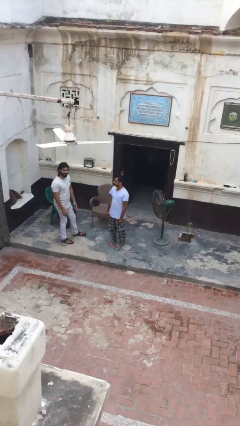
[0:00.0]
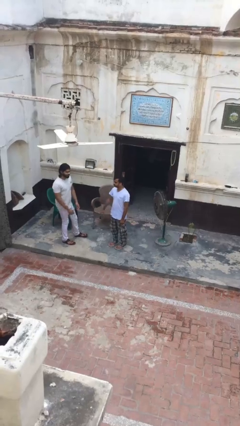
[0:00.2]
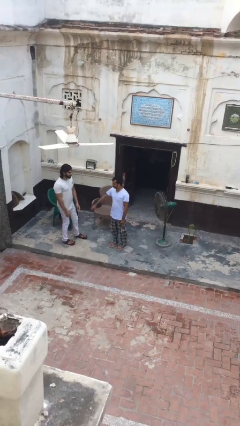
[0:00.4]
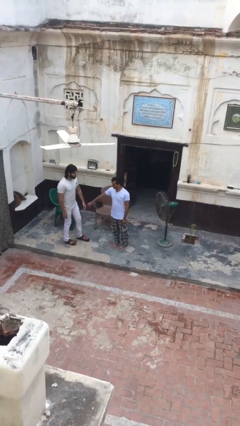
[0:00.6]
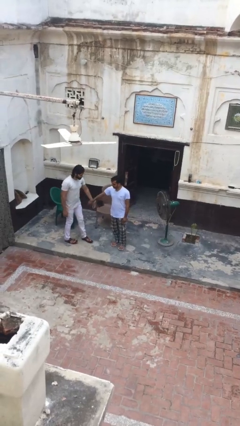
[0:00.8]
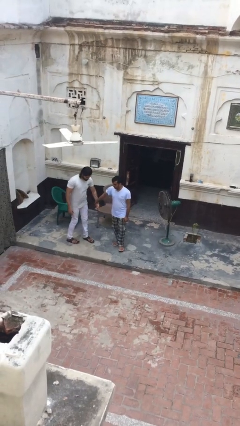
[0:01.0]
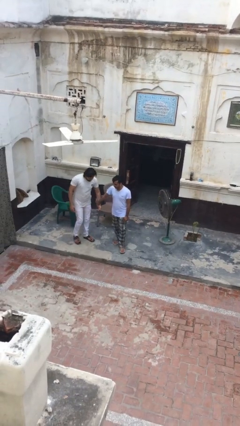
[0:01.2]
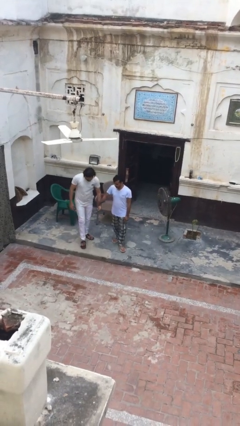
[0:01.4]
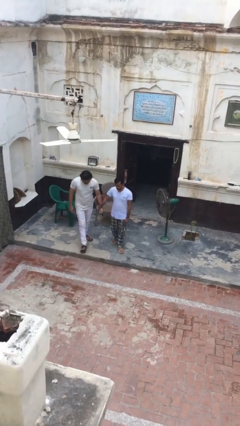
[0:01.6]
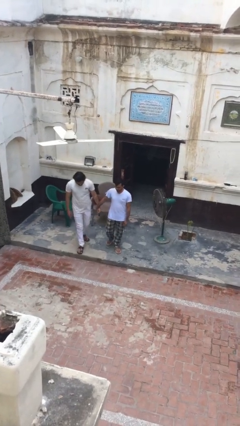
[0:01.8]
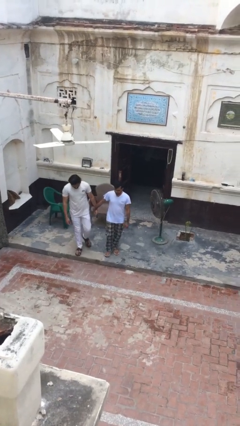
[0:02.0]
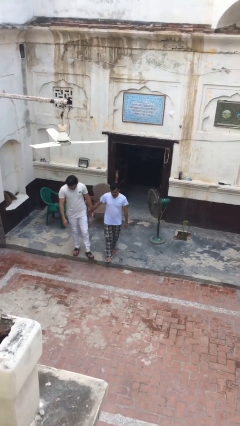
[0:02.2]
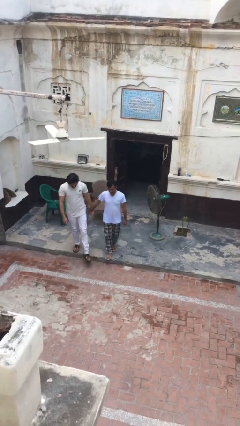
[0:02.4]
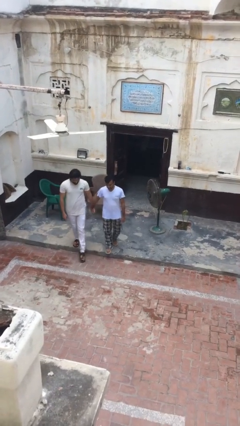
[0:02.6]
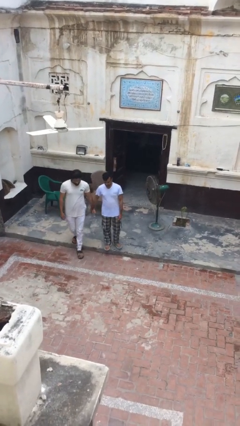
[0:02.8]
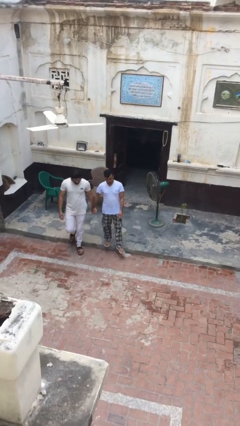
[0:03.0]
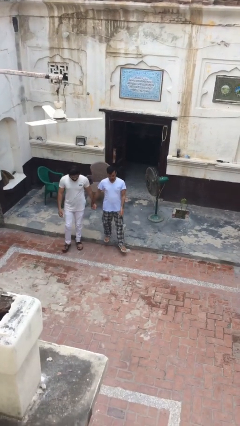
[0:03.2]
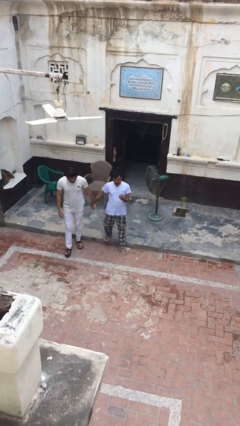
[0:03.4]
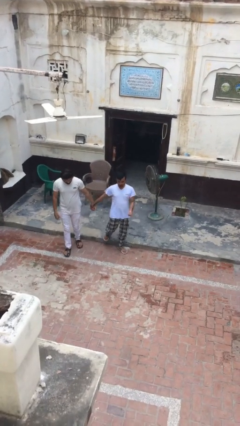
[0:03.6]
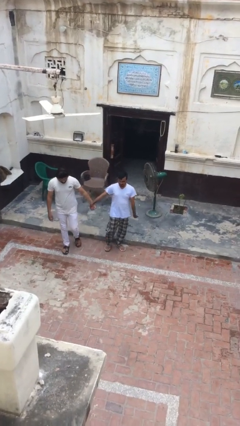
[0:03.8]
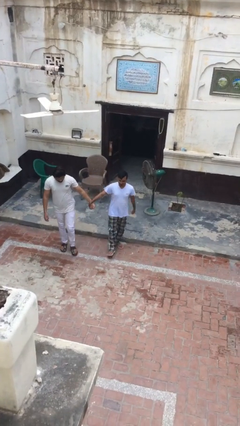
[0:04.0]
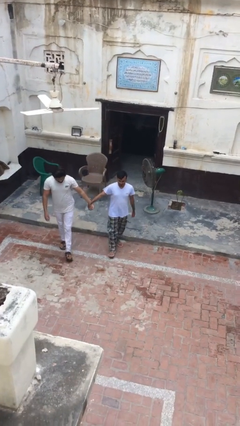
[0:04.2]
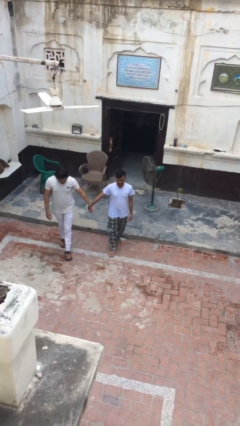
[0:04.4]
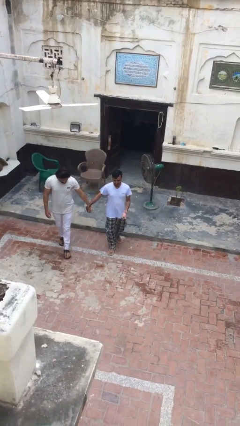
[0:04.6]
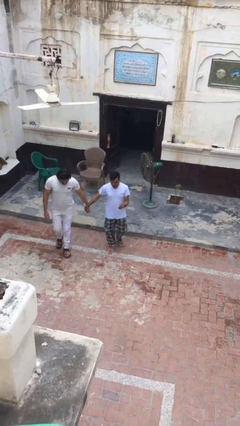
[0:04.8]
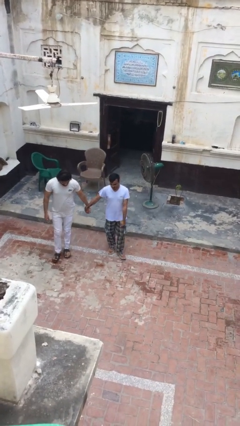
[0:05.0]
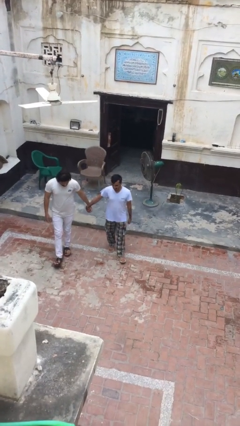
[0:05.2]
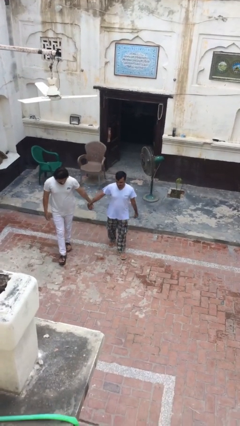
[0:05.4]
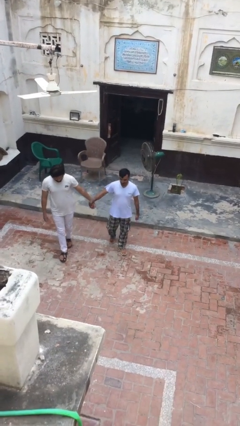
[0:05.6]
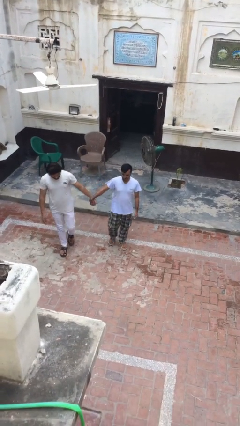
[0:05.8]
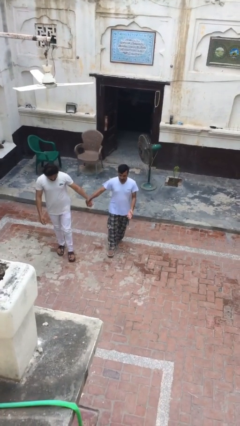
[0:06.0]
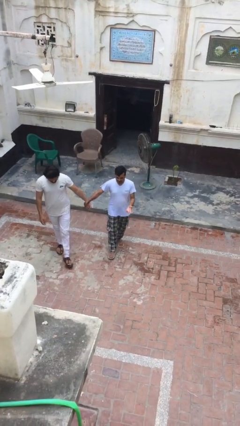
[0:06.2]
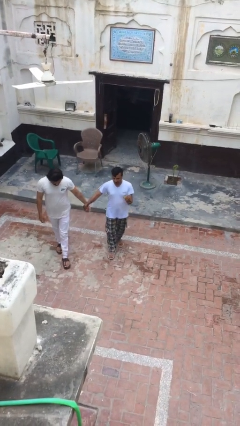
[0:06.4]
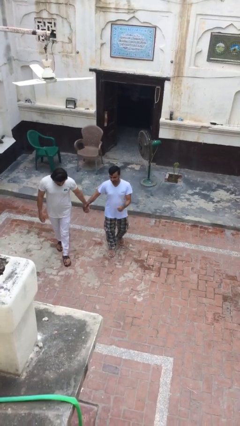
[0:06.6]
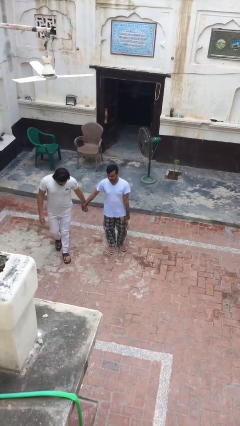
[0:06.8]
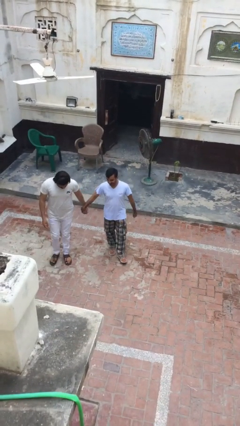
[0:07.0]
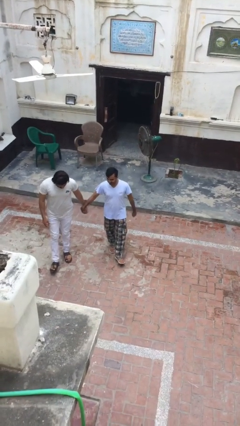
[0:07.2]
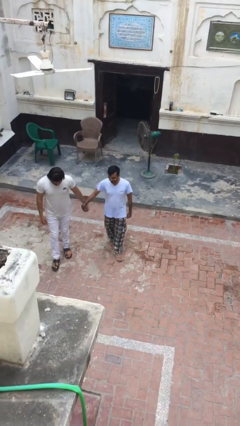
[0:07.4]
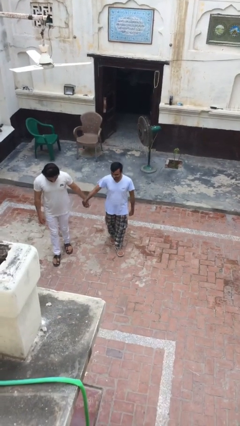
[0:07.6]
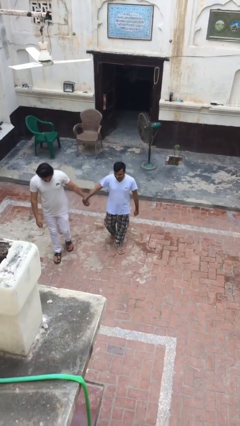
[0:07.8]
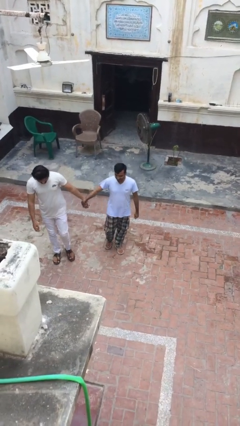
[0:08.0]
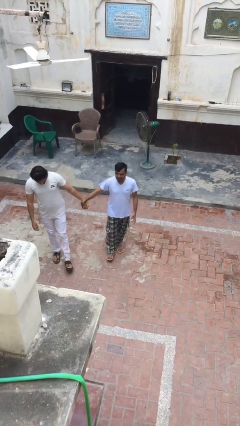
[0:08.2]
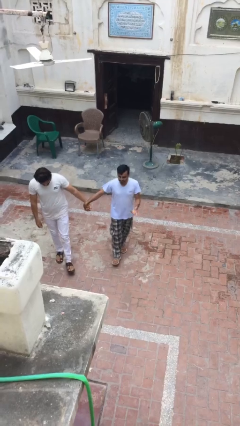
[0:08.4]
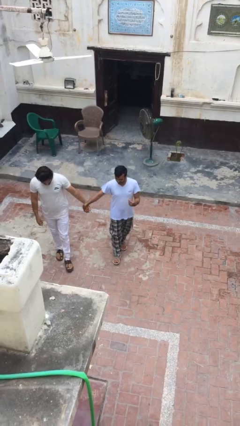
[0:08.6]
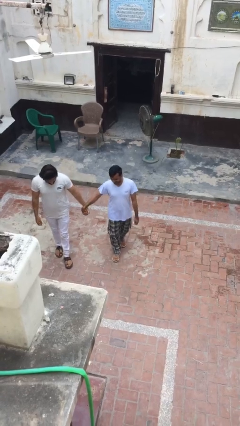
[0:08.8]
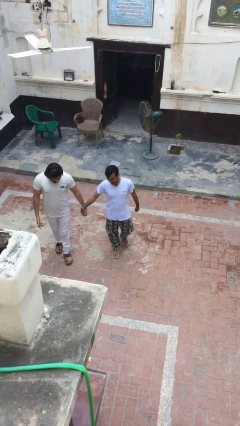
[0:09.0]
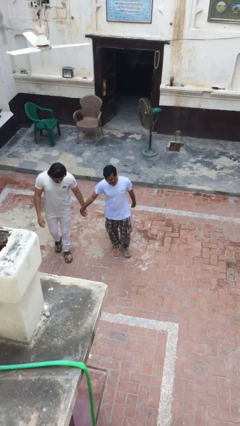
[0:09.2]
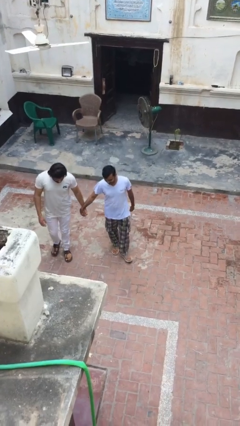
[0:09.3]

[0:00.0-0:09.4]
person holds hand

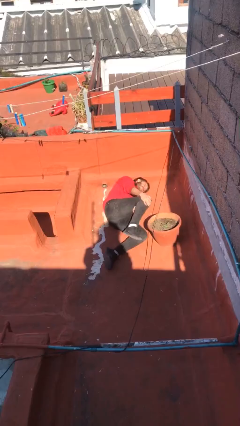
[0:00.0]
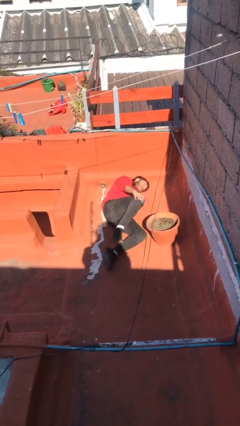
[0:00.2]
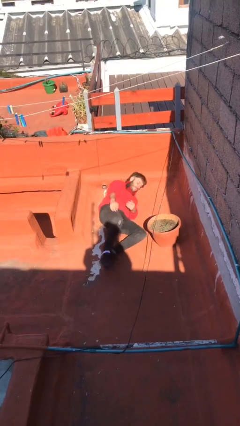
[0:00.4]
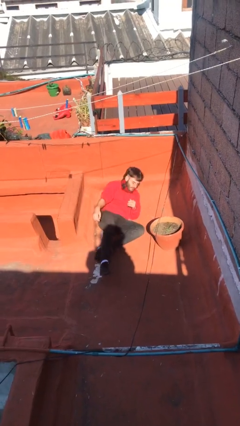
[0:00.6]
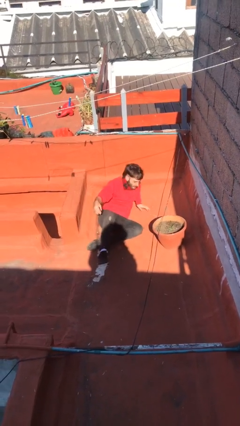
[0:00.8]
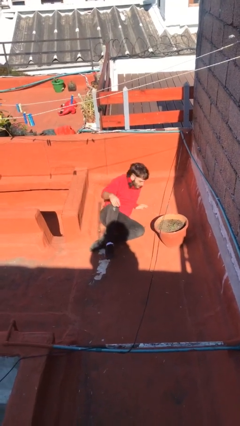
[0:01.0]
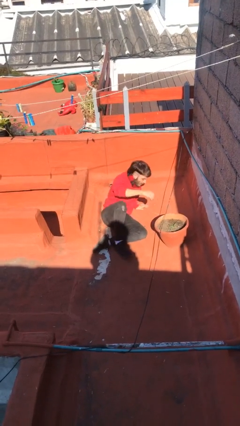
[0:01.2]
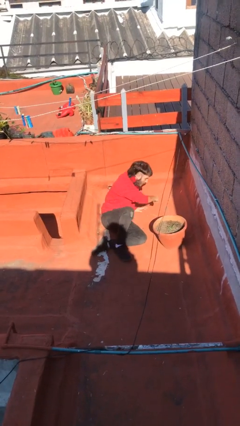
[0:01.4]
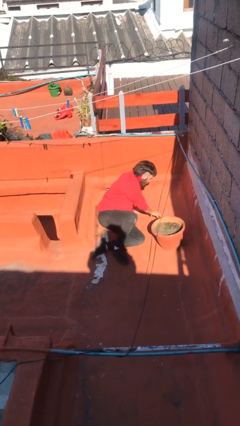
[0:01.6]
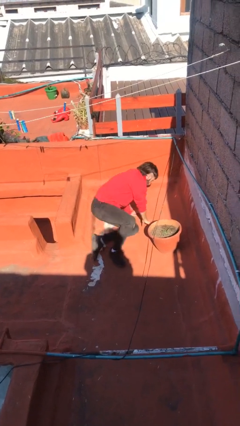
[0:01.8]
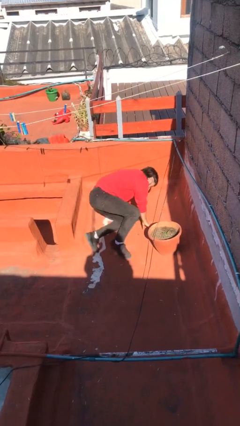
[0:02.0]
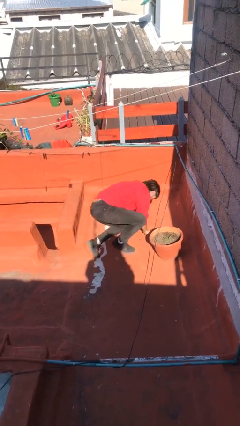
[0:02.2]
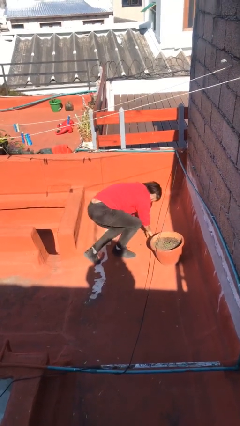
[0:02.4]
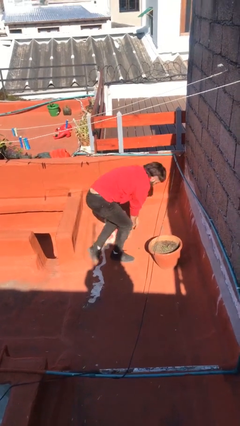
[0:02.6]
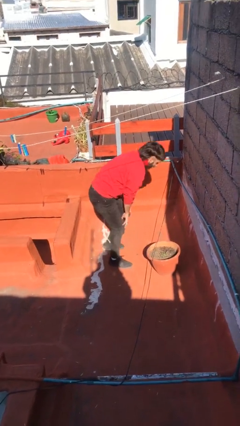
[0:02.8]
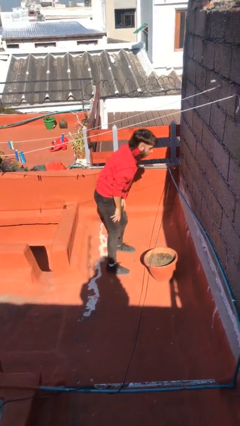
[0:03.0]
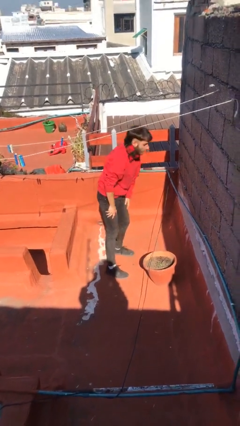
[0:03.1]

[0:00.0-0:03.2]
person stands up from floor

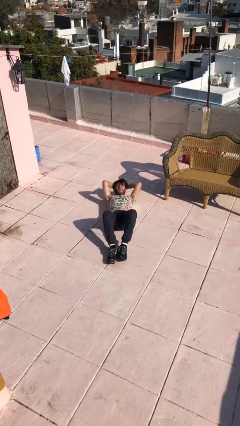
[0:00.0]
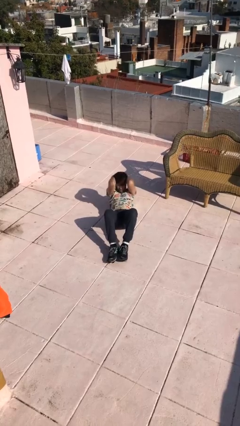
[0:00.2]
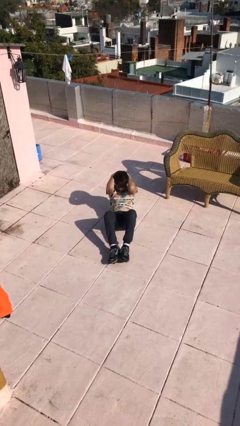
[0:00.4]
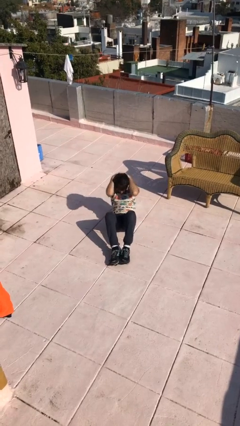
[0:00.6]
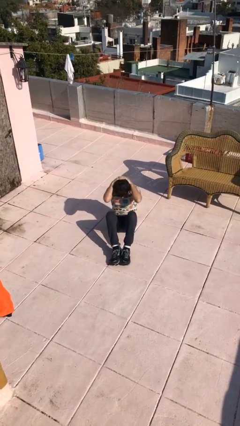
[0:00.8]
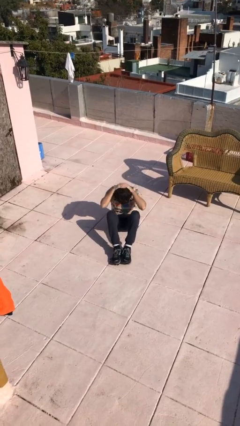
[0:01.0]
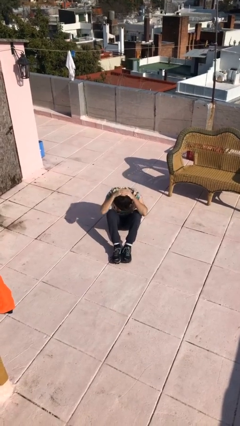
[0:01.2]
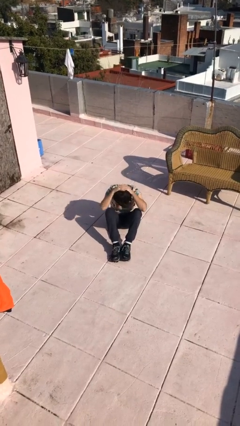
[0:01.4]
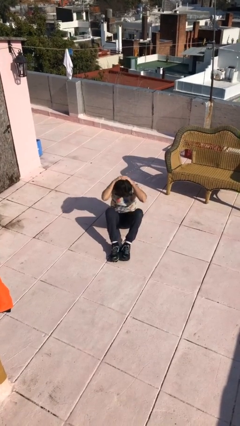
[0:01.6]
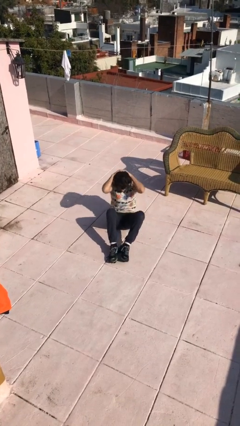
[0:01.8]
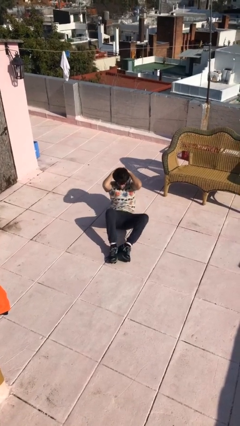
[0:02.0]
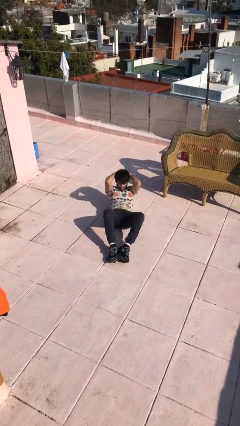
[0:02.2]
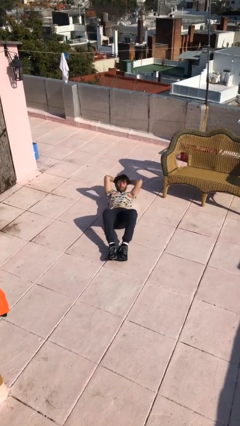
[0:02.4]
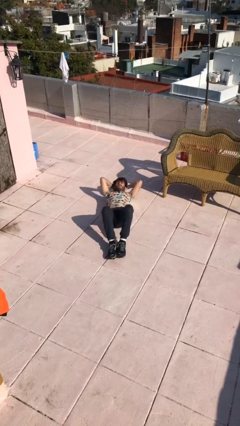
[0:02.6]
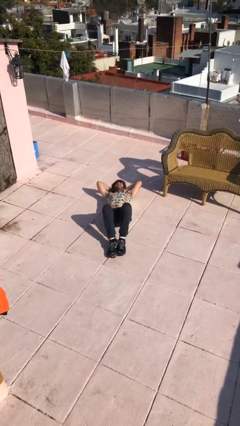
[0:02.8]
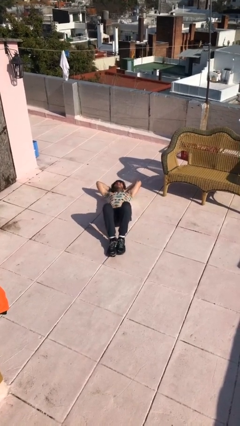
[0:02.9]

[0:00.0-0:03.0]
person exercises with situp

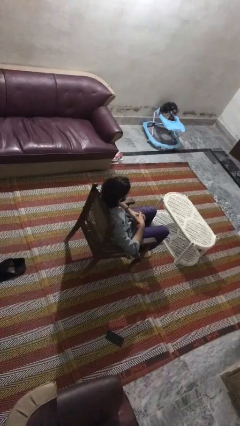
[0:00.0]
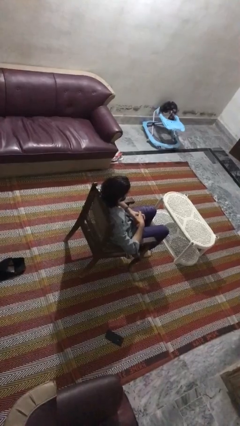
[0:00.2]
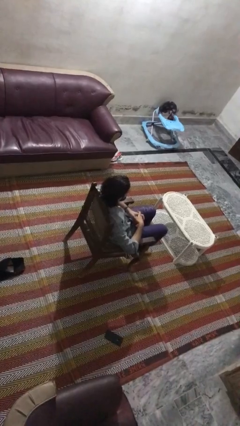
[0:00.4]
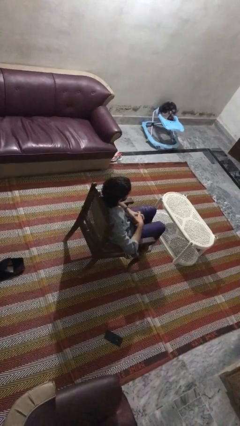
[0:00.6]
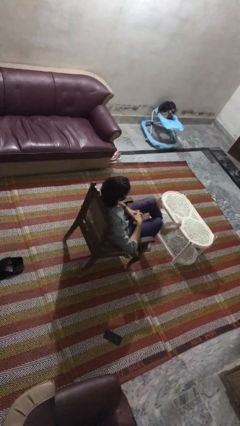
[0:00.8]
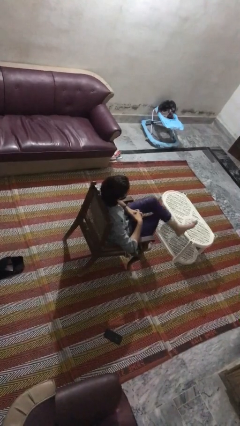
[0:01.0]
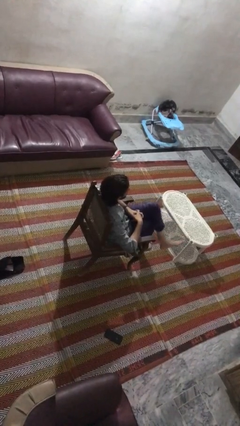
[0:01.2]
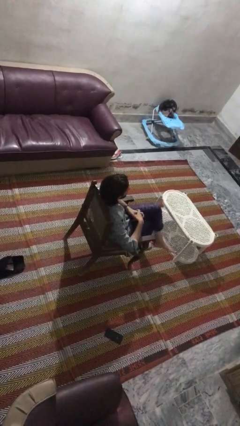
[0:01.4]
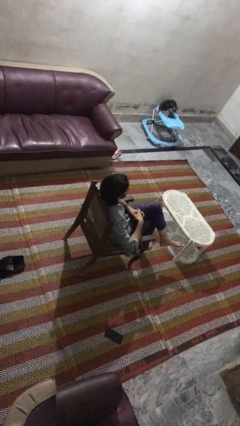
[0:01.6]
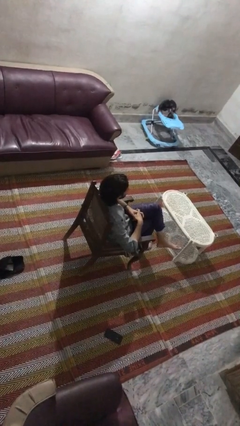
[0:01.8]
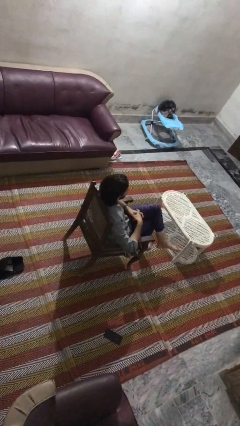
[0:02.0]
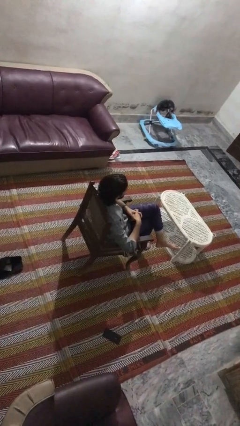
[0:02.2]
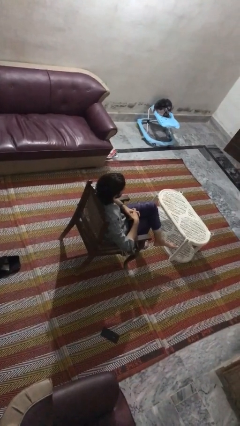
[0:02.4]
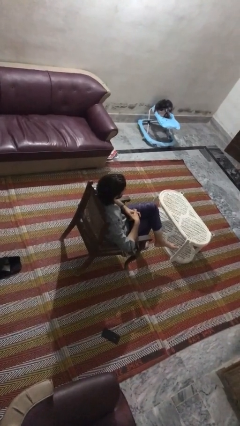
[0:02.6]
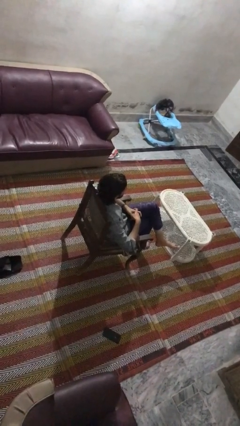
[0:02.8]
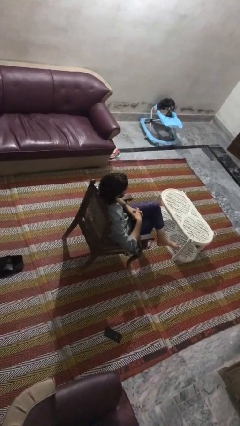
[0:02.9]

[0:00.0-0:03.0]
person crosses legs
